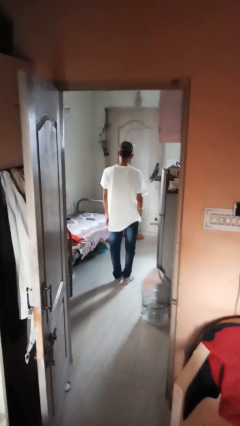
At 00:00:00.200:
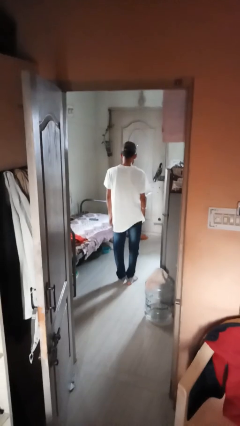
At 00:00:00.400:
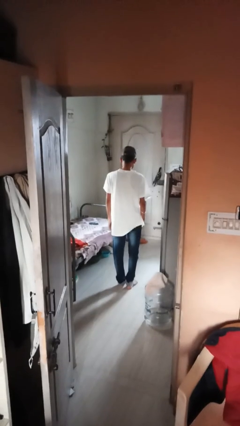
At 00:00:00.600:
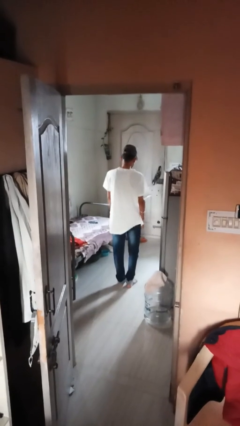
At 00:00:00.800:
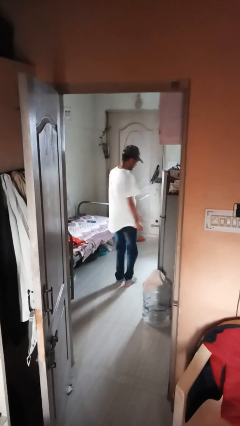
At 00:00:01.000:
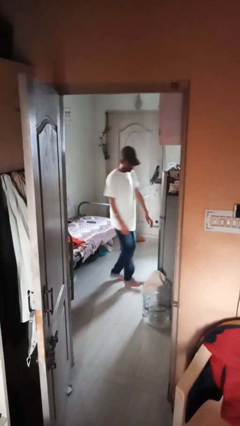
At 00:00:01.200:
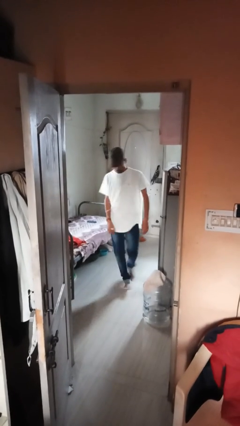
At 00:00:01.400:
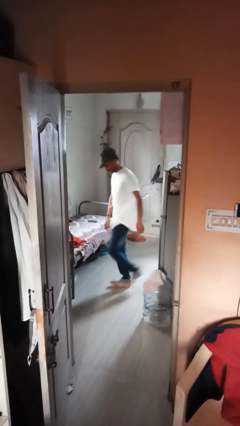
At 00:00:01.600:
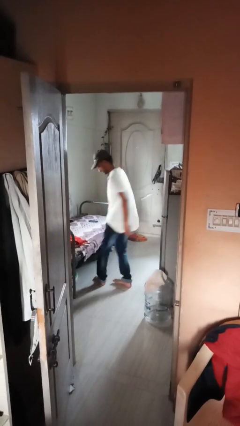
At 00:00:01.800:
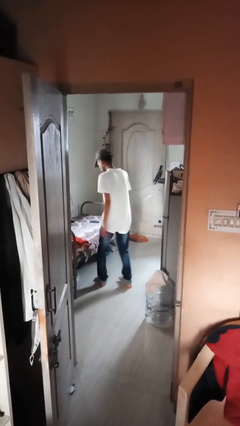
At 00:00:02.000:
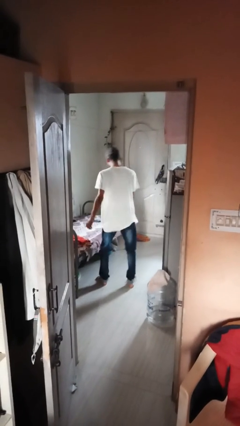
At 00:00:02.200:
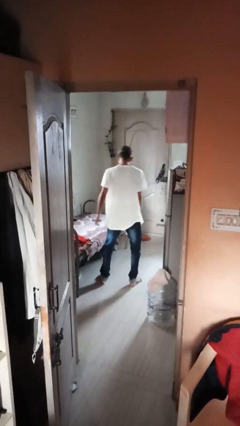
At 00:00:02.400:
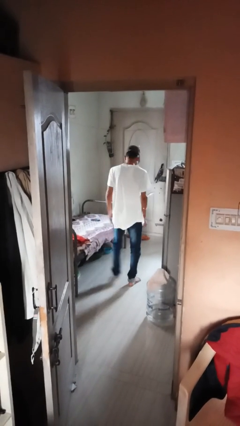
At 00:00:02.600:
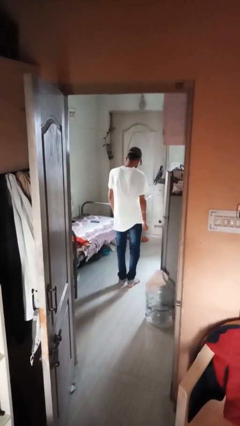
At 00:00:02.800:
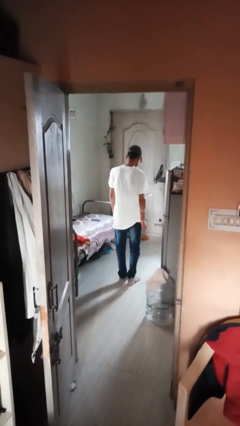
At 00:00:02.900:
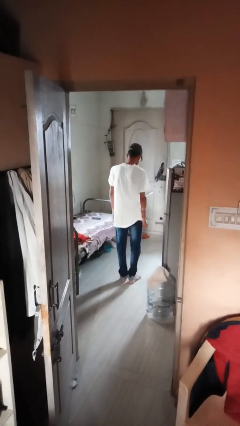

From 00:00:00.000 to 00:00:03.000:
person twirls

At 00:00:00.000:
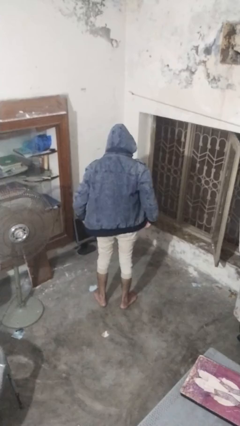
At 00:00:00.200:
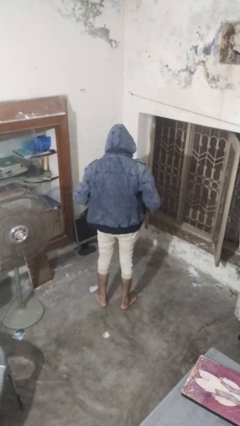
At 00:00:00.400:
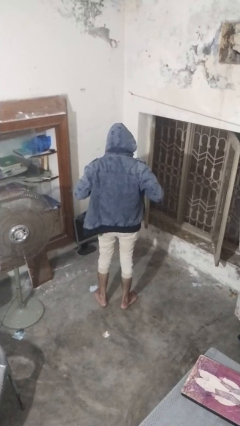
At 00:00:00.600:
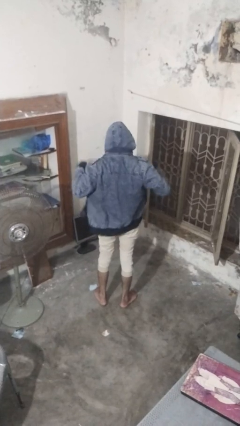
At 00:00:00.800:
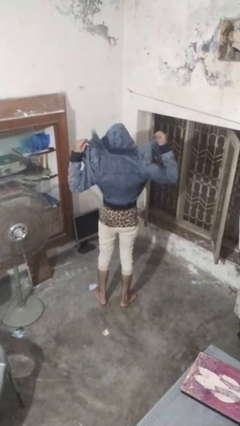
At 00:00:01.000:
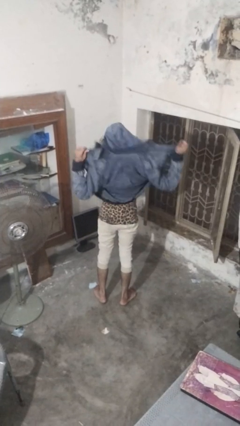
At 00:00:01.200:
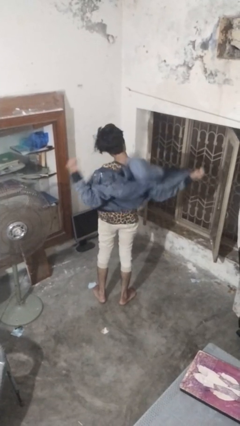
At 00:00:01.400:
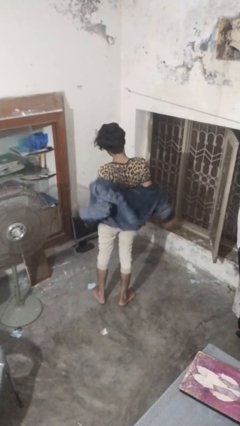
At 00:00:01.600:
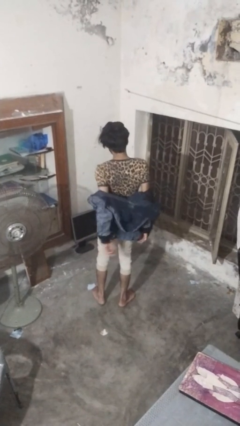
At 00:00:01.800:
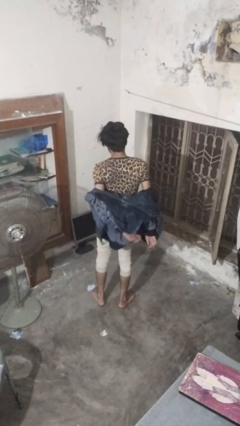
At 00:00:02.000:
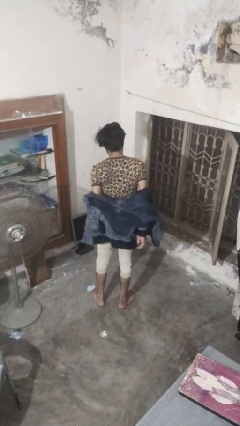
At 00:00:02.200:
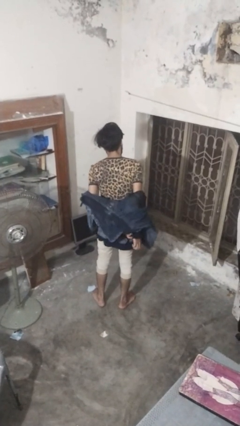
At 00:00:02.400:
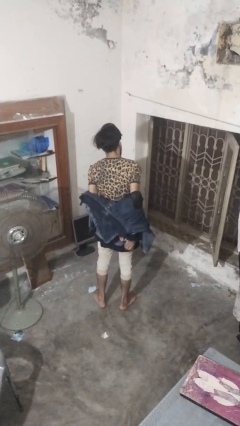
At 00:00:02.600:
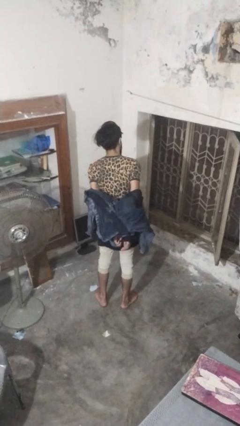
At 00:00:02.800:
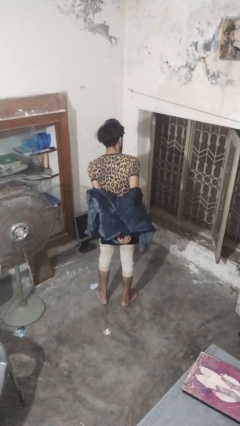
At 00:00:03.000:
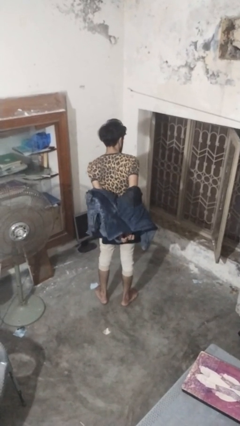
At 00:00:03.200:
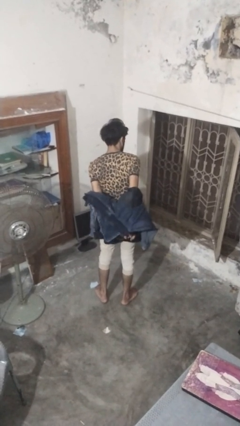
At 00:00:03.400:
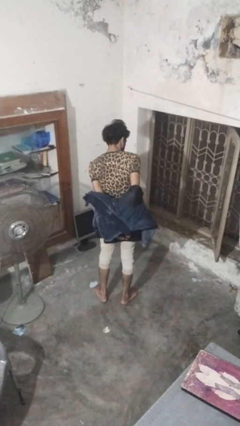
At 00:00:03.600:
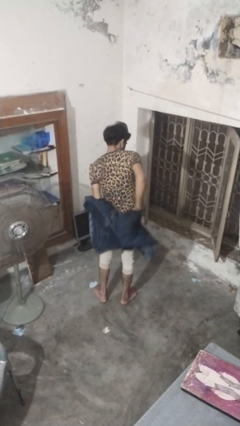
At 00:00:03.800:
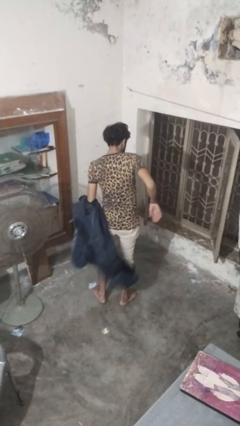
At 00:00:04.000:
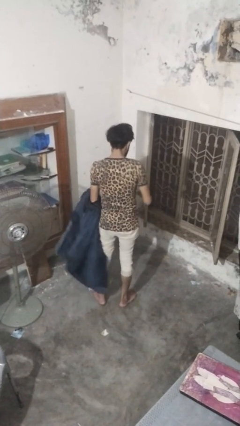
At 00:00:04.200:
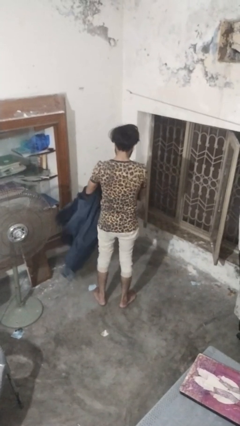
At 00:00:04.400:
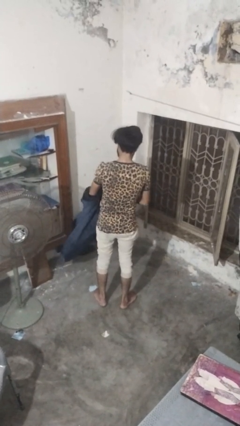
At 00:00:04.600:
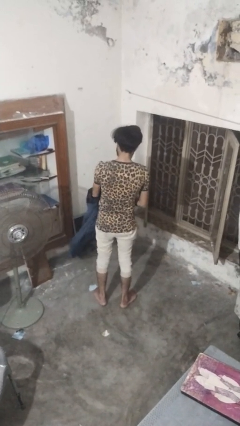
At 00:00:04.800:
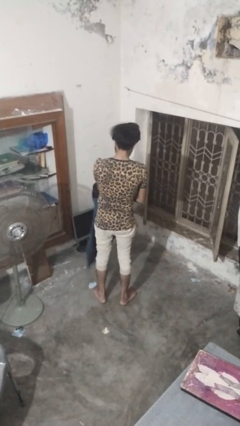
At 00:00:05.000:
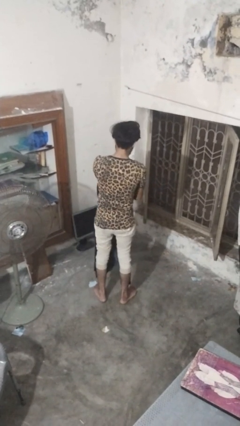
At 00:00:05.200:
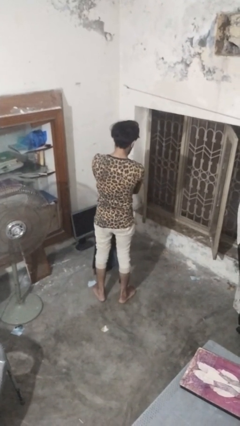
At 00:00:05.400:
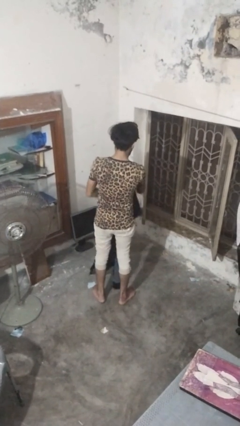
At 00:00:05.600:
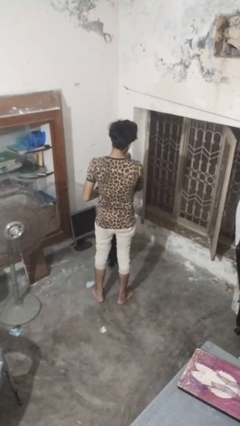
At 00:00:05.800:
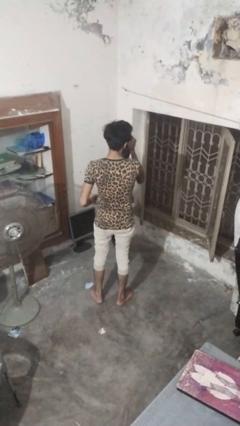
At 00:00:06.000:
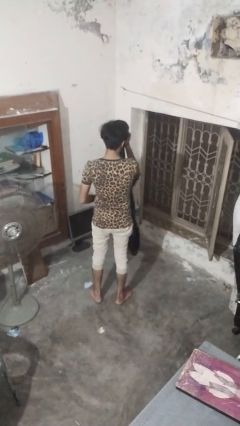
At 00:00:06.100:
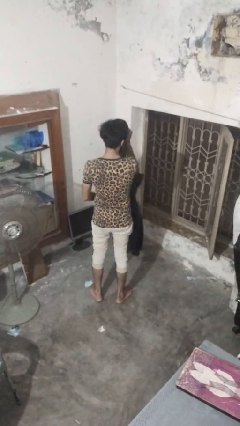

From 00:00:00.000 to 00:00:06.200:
person takes off hoodie

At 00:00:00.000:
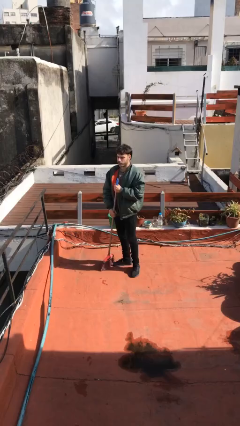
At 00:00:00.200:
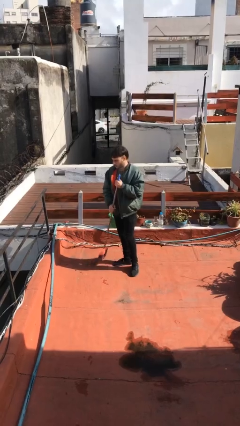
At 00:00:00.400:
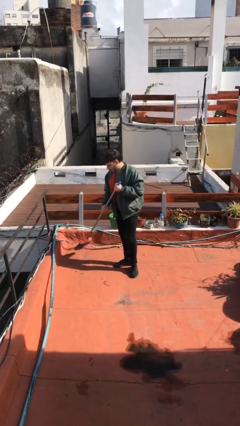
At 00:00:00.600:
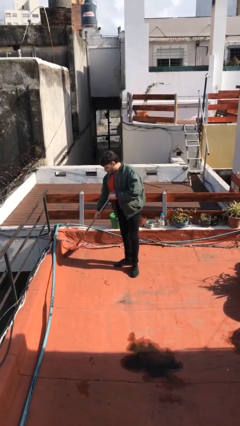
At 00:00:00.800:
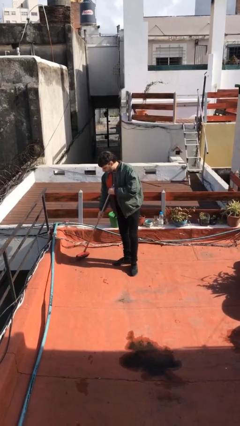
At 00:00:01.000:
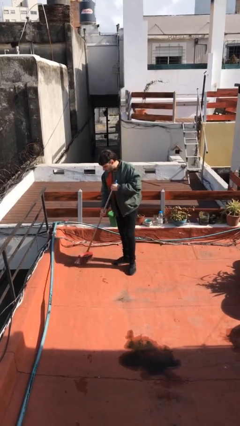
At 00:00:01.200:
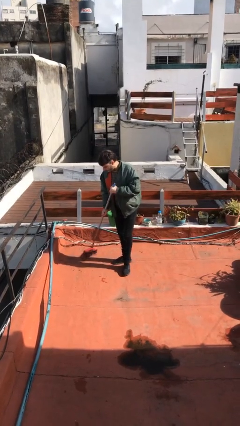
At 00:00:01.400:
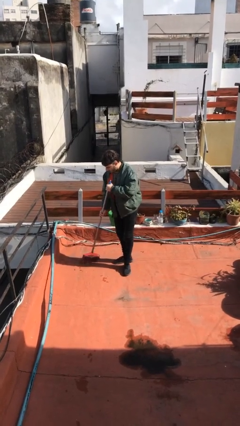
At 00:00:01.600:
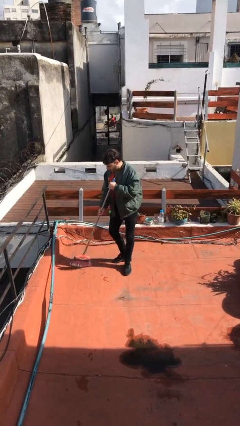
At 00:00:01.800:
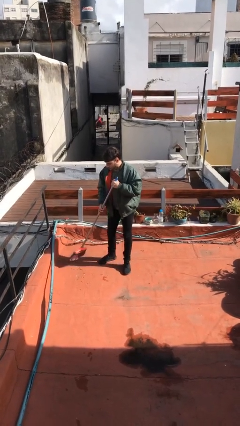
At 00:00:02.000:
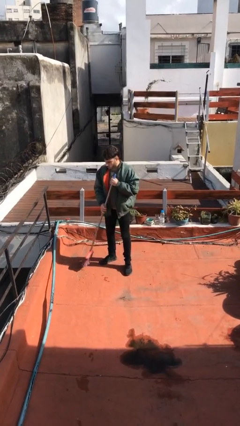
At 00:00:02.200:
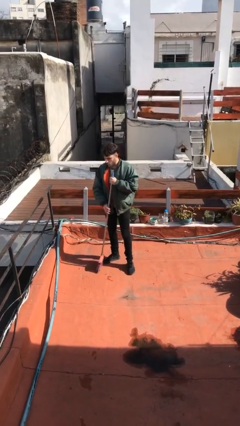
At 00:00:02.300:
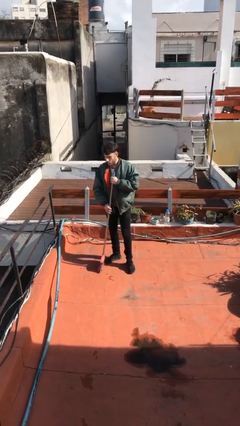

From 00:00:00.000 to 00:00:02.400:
person sweeps floor

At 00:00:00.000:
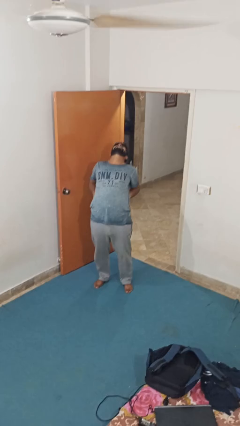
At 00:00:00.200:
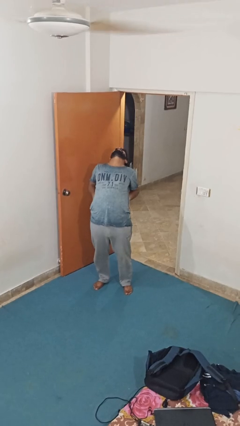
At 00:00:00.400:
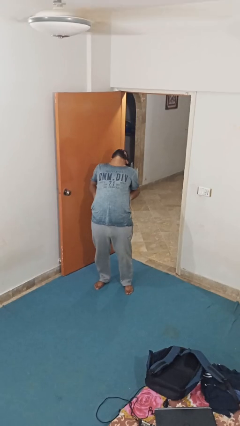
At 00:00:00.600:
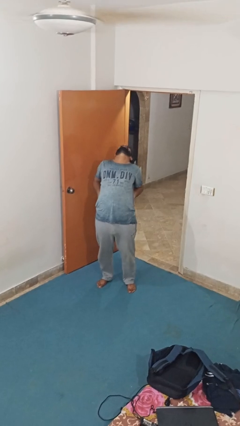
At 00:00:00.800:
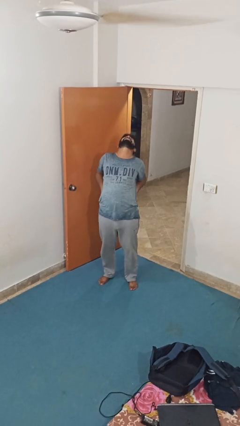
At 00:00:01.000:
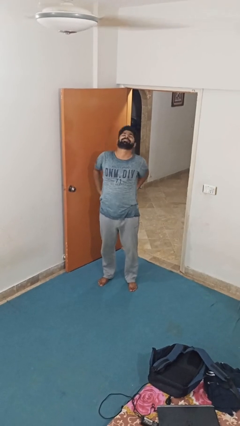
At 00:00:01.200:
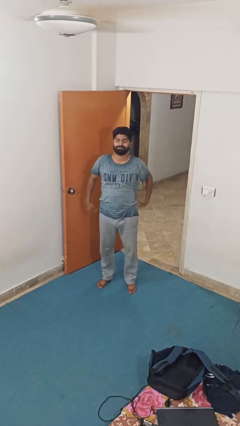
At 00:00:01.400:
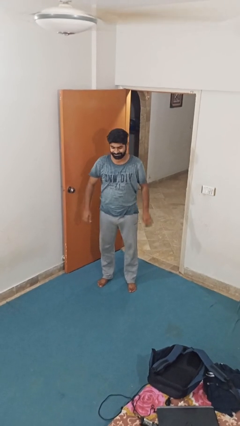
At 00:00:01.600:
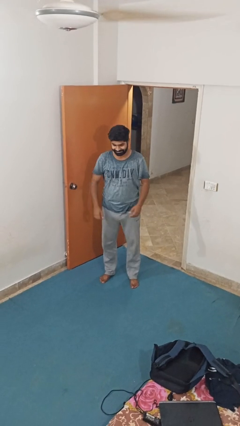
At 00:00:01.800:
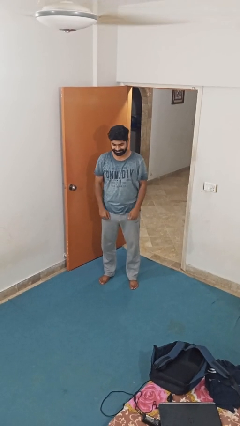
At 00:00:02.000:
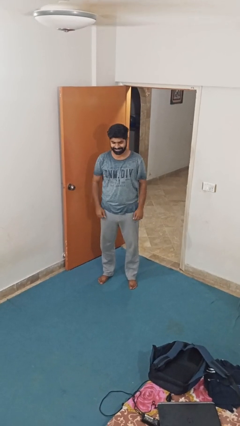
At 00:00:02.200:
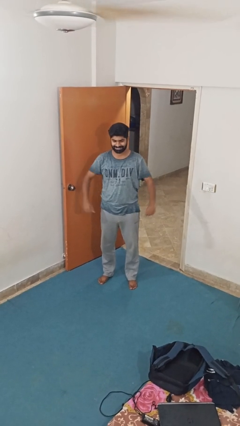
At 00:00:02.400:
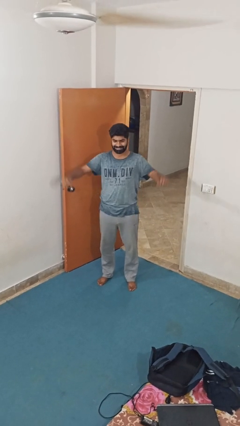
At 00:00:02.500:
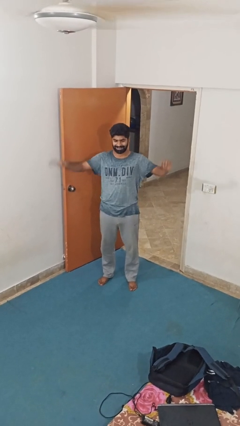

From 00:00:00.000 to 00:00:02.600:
person stretches back

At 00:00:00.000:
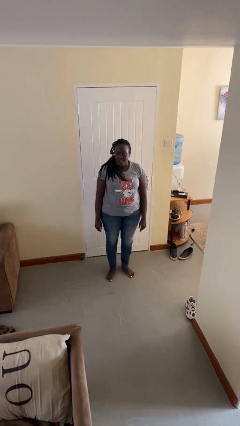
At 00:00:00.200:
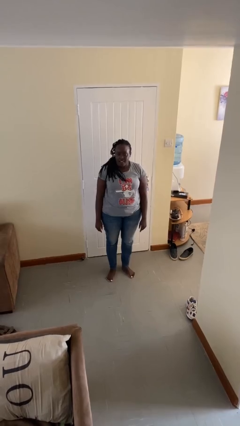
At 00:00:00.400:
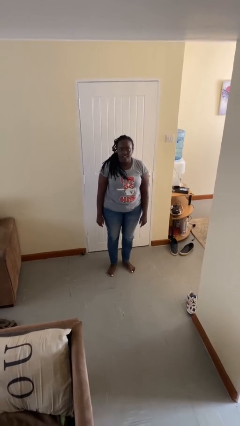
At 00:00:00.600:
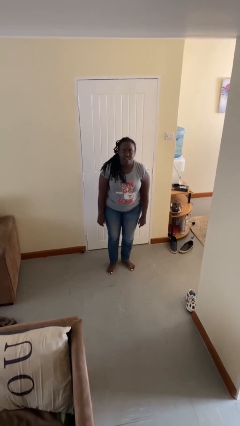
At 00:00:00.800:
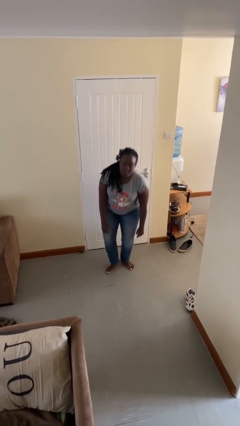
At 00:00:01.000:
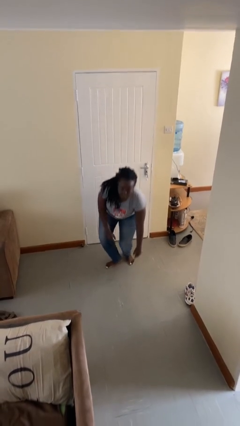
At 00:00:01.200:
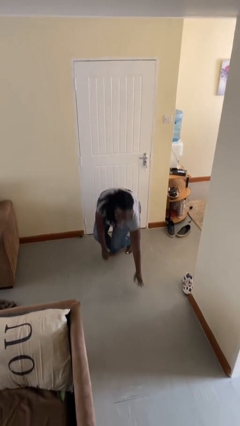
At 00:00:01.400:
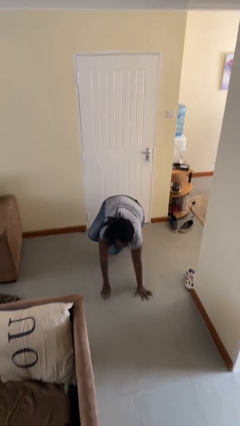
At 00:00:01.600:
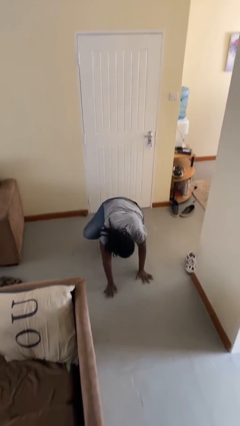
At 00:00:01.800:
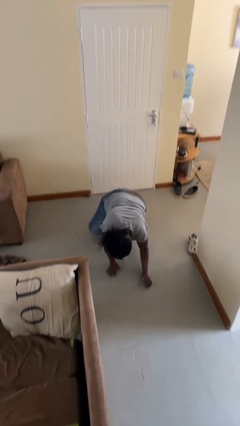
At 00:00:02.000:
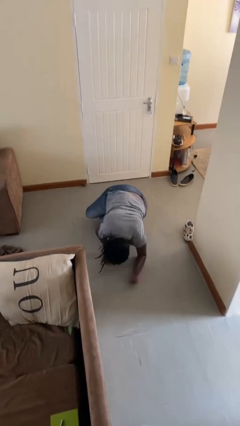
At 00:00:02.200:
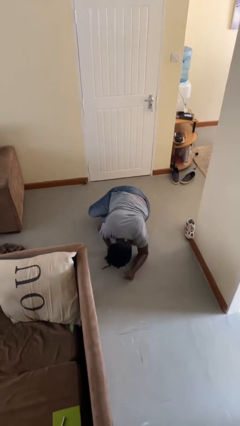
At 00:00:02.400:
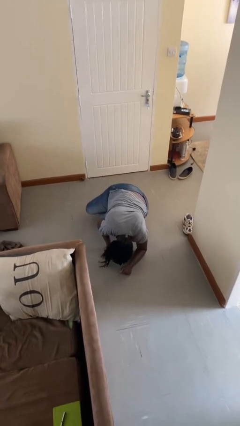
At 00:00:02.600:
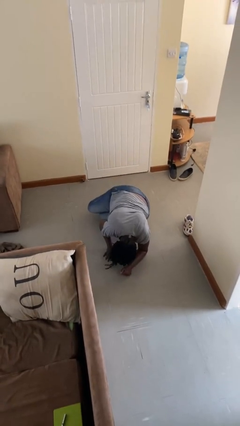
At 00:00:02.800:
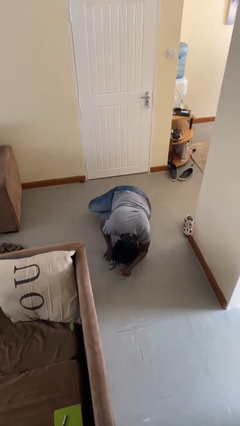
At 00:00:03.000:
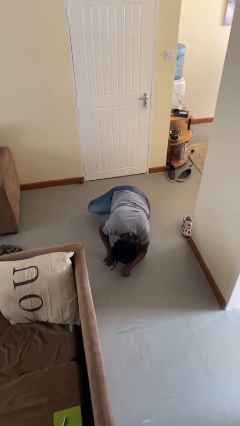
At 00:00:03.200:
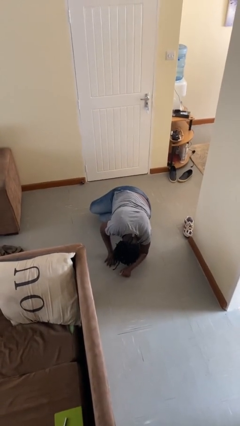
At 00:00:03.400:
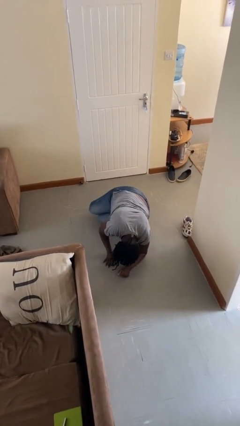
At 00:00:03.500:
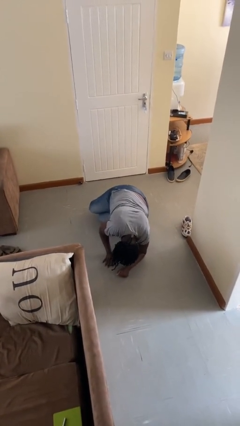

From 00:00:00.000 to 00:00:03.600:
person falls while standing
